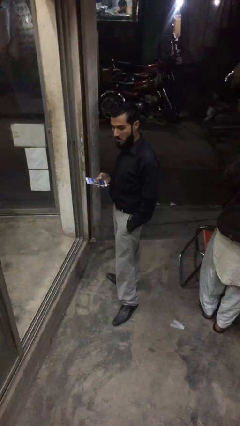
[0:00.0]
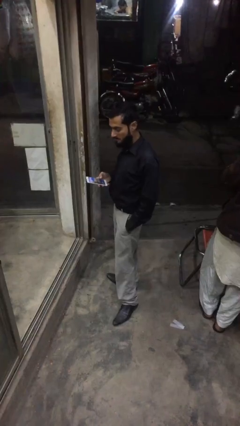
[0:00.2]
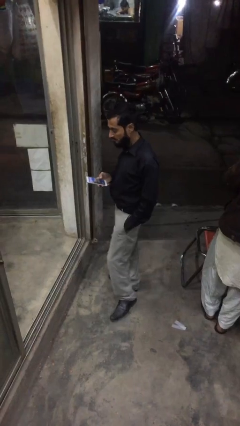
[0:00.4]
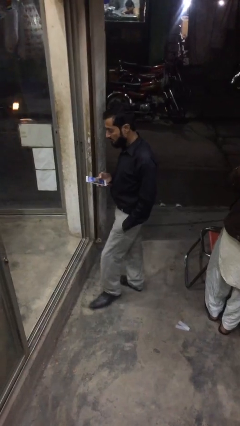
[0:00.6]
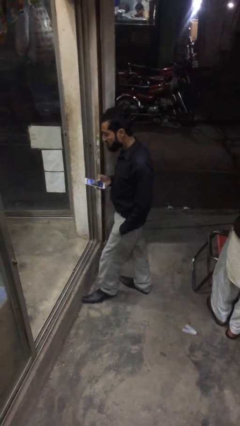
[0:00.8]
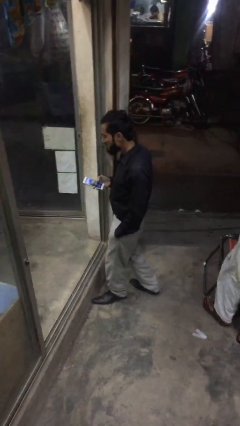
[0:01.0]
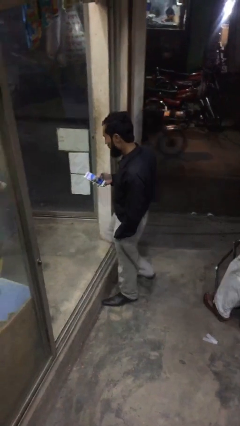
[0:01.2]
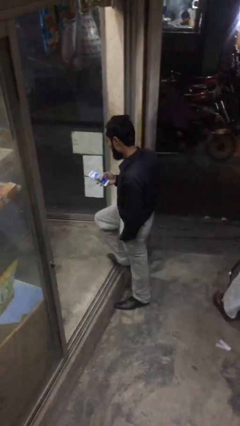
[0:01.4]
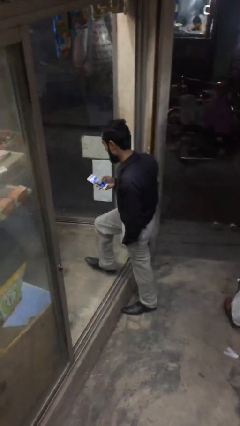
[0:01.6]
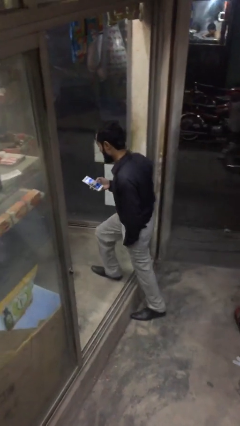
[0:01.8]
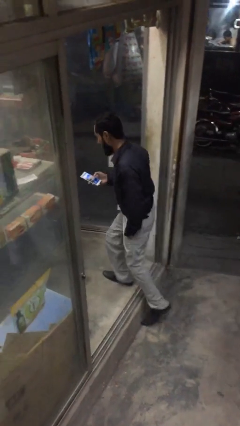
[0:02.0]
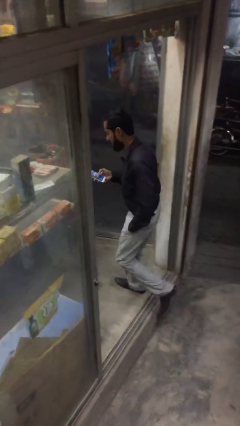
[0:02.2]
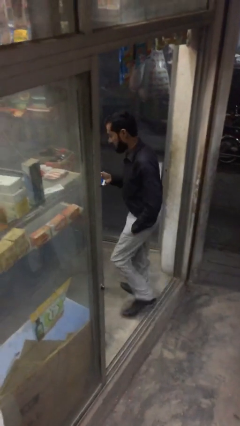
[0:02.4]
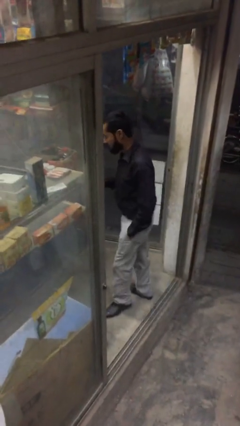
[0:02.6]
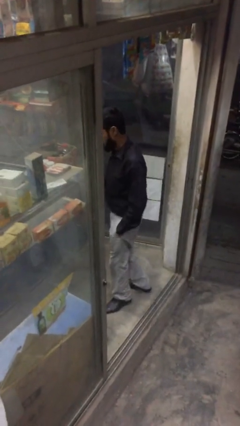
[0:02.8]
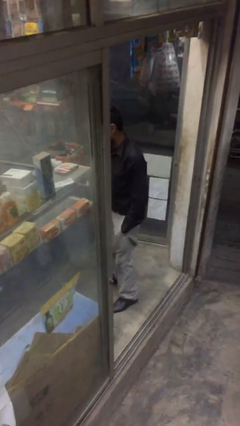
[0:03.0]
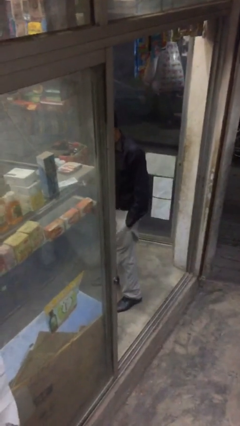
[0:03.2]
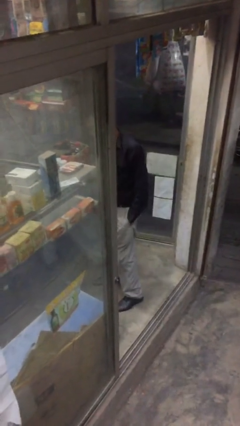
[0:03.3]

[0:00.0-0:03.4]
person enters scene through structure

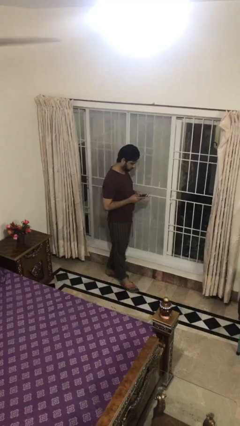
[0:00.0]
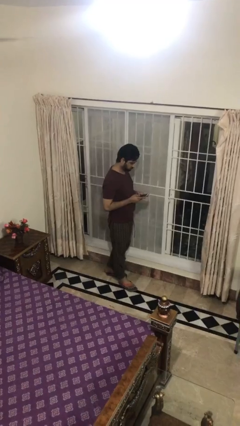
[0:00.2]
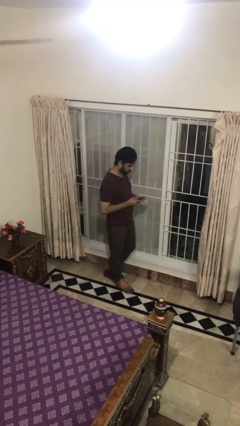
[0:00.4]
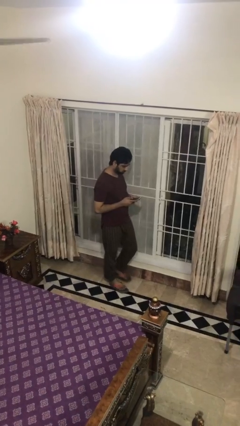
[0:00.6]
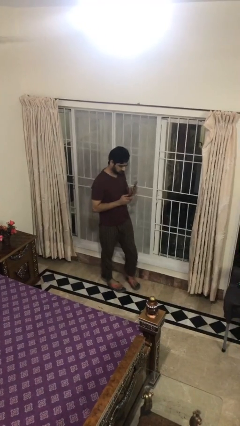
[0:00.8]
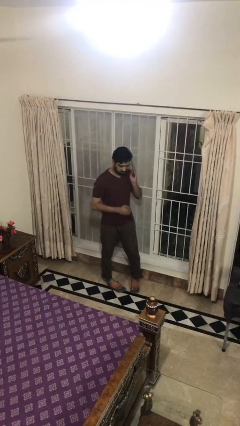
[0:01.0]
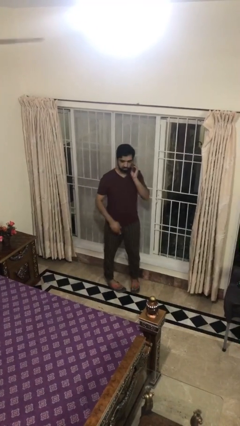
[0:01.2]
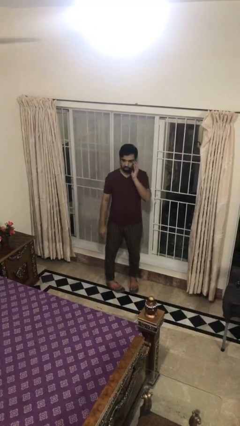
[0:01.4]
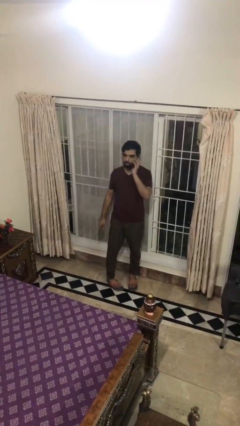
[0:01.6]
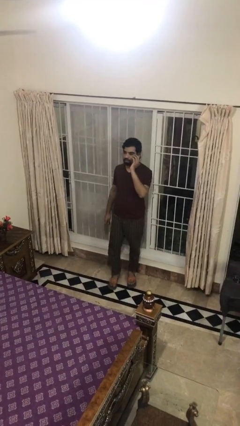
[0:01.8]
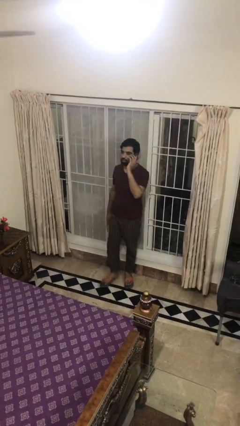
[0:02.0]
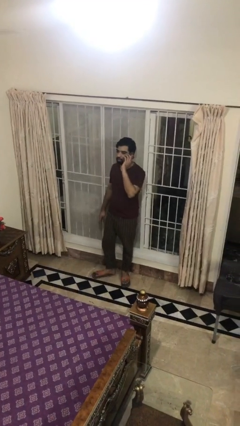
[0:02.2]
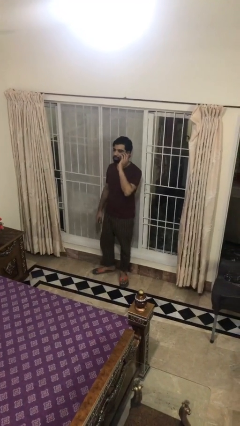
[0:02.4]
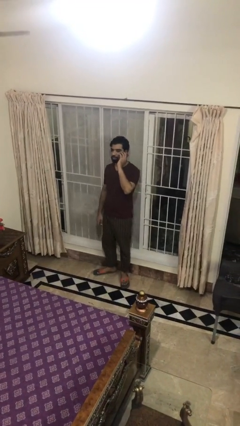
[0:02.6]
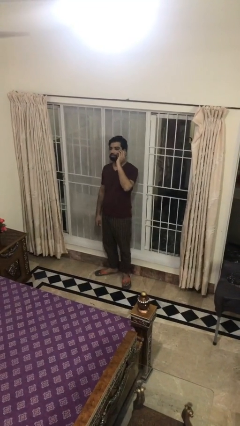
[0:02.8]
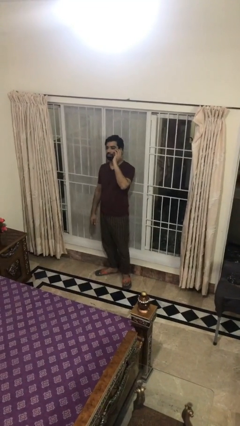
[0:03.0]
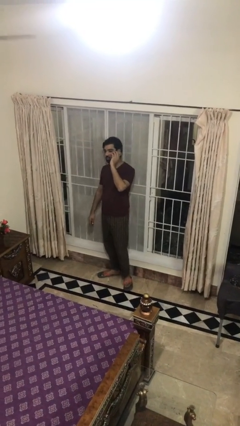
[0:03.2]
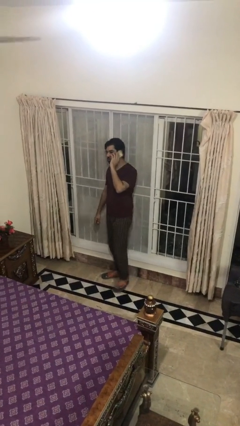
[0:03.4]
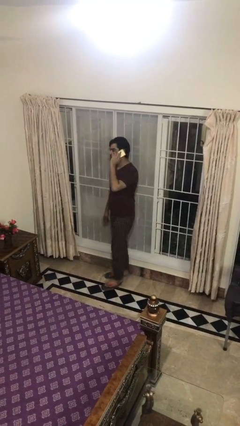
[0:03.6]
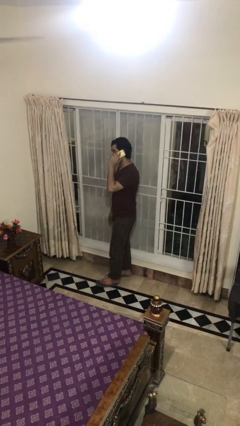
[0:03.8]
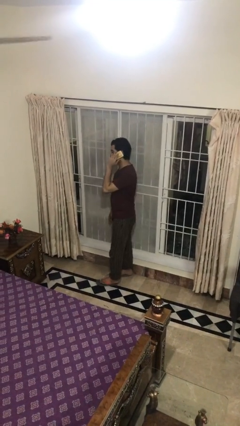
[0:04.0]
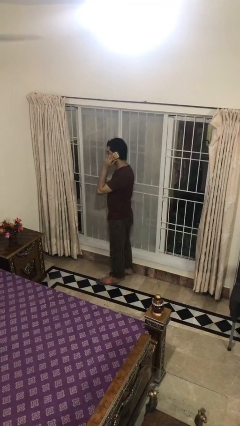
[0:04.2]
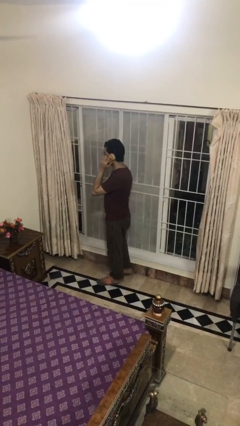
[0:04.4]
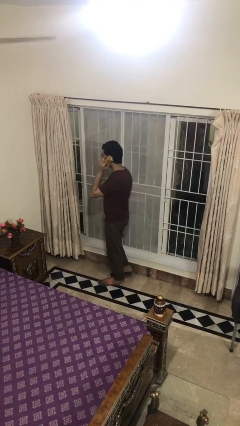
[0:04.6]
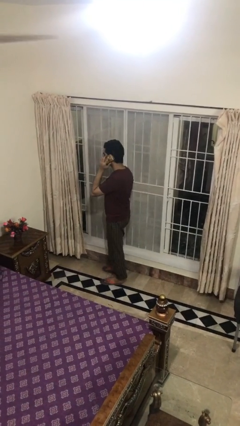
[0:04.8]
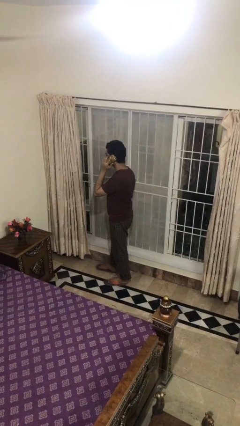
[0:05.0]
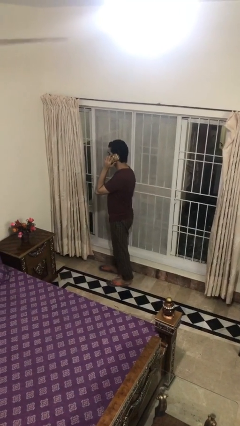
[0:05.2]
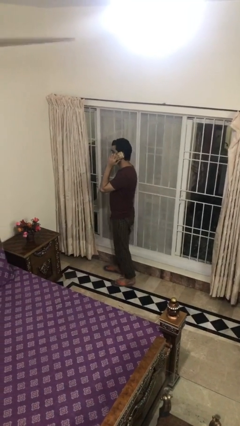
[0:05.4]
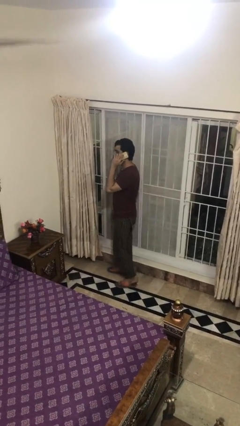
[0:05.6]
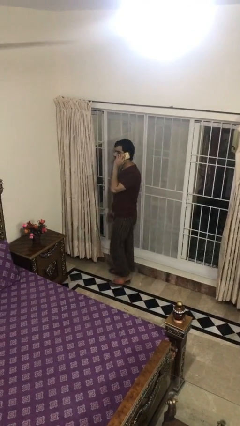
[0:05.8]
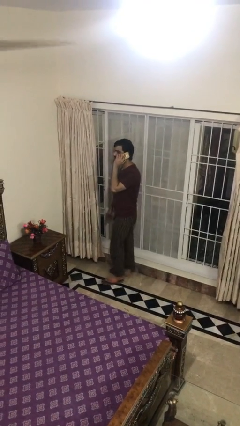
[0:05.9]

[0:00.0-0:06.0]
person talks on phone

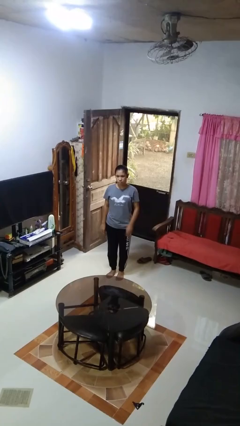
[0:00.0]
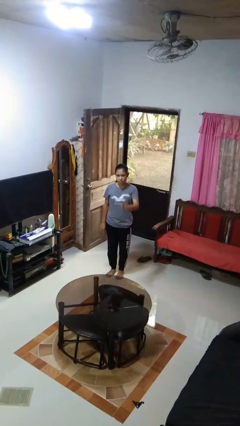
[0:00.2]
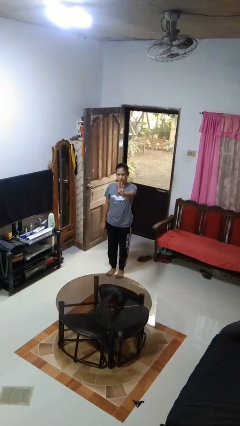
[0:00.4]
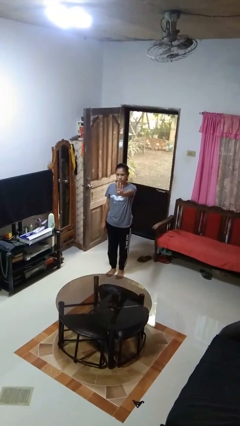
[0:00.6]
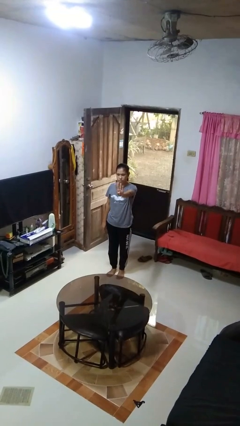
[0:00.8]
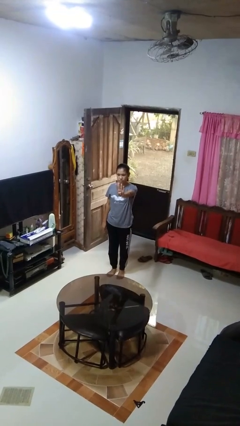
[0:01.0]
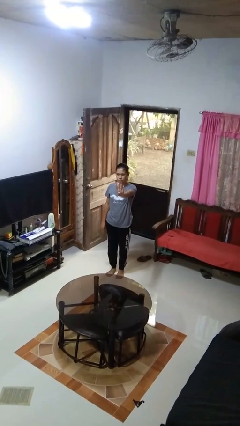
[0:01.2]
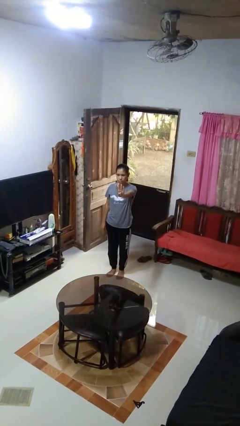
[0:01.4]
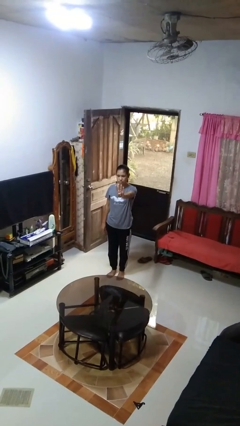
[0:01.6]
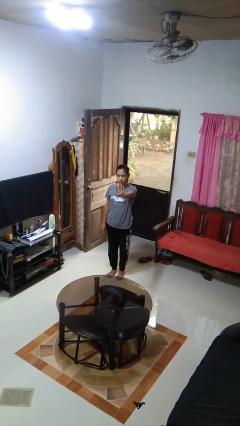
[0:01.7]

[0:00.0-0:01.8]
person gestures number four

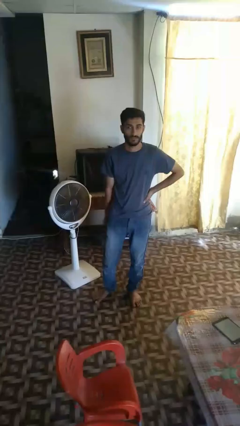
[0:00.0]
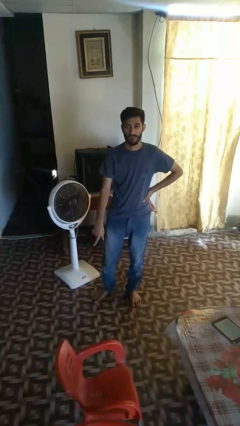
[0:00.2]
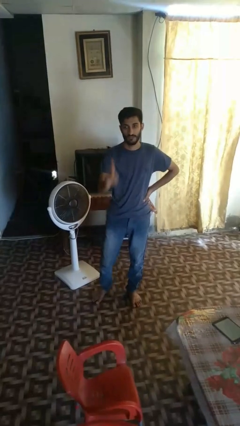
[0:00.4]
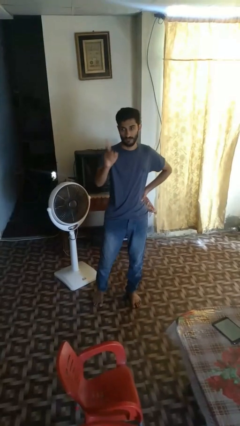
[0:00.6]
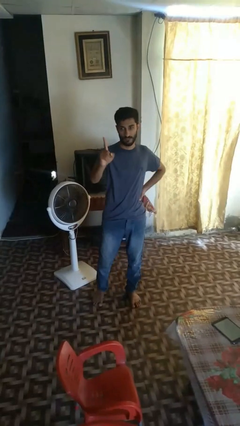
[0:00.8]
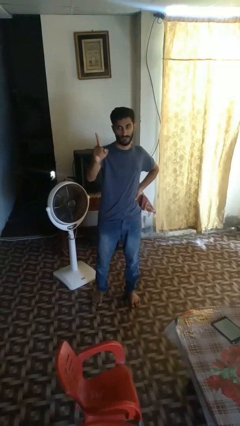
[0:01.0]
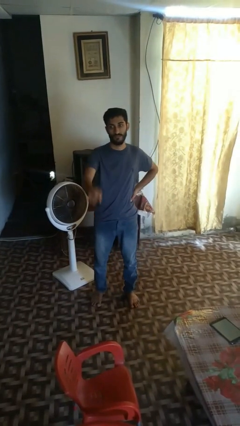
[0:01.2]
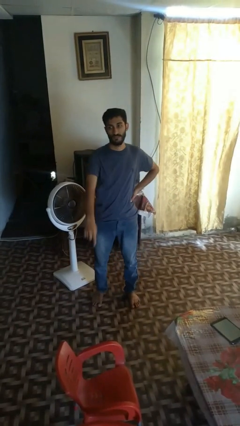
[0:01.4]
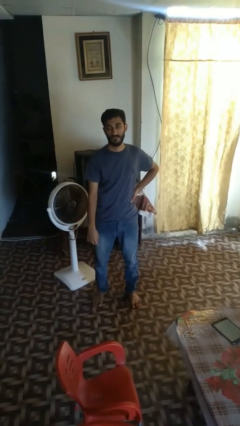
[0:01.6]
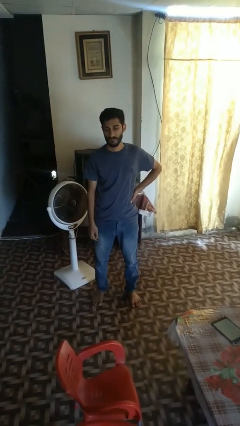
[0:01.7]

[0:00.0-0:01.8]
person gestures number one

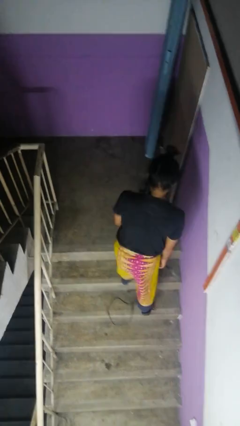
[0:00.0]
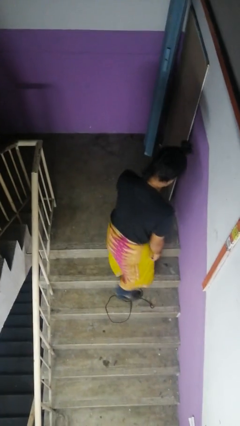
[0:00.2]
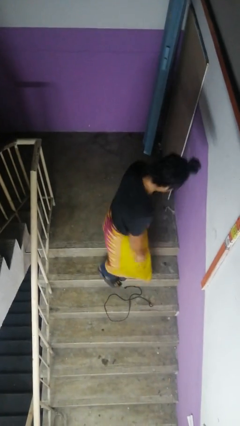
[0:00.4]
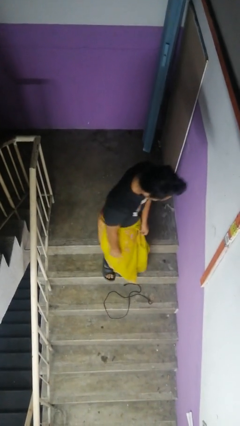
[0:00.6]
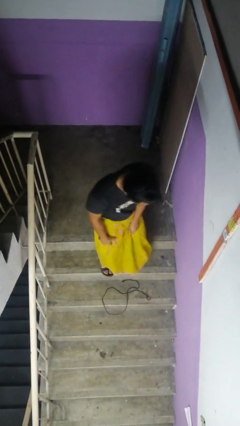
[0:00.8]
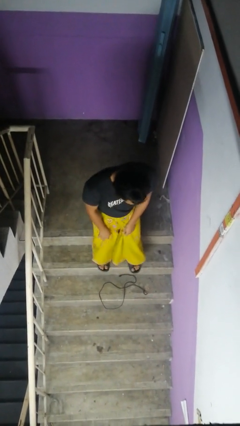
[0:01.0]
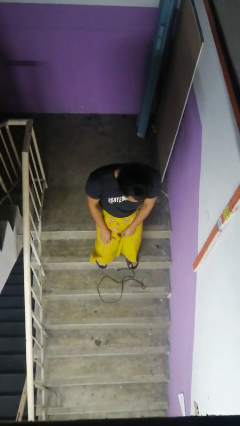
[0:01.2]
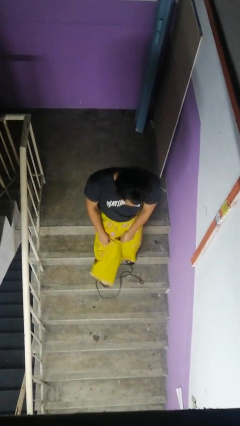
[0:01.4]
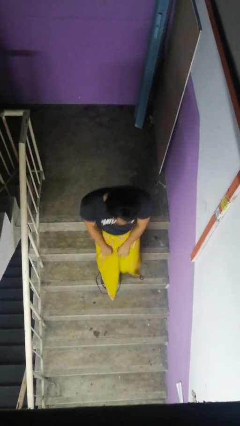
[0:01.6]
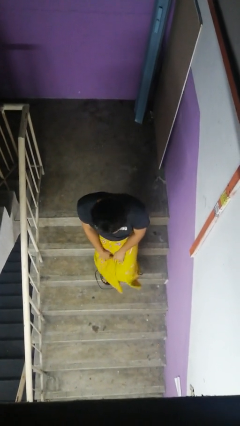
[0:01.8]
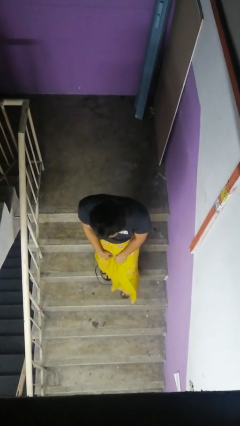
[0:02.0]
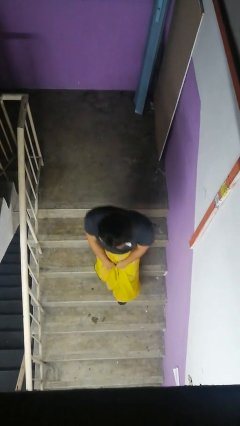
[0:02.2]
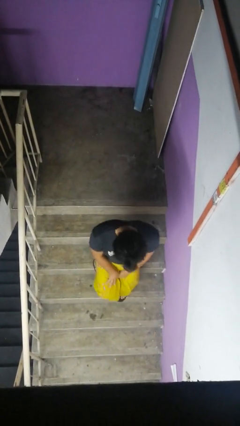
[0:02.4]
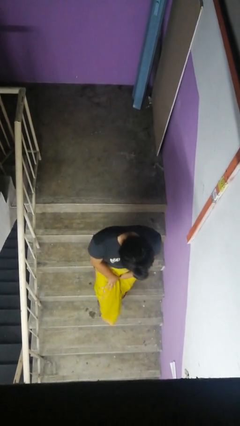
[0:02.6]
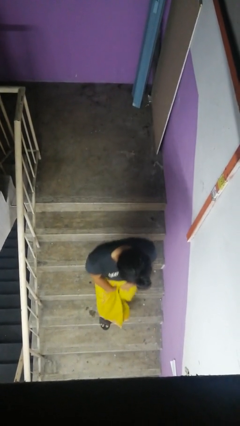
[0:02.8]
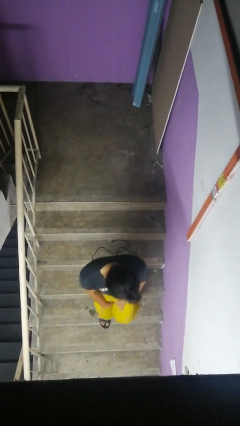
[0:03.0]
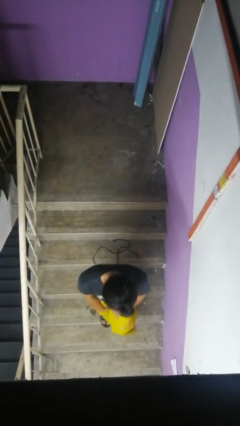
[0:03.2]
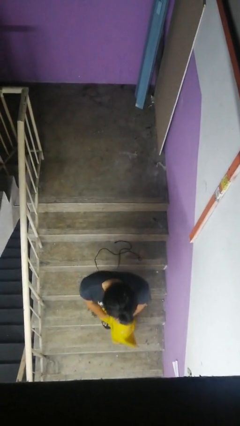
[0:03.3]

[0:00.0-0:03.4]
person climbs down stairs

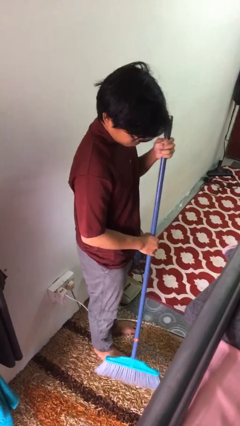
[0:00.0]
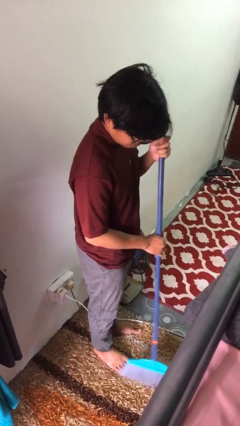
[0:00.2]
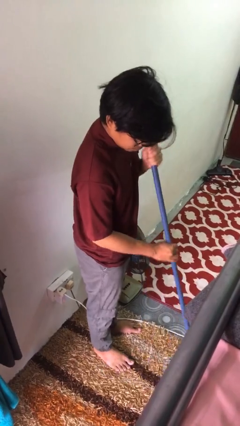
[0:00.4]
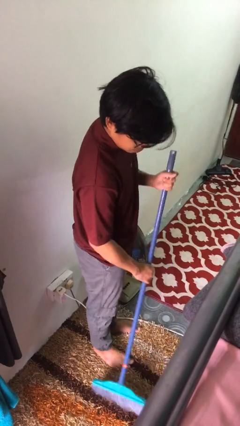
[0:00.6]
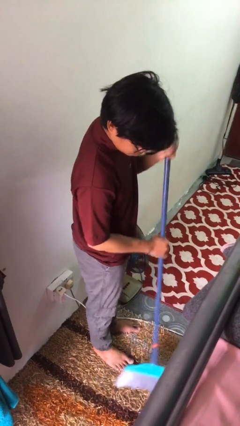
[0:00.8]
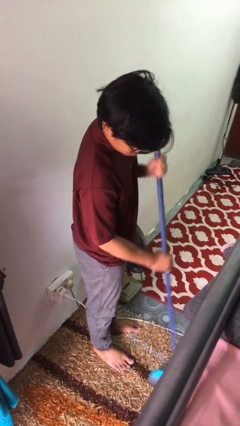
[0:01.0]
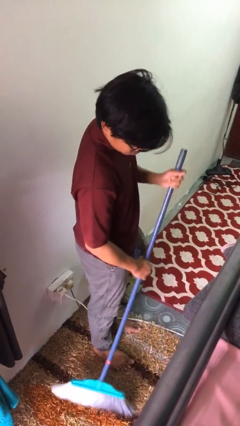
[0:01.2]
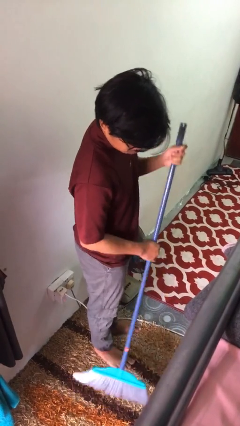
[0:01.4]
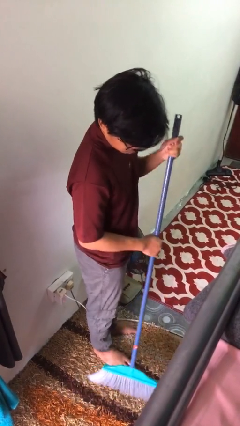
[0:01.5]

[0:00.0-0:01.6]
person sweeps floor
